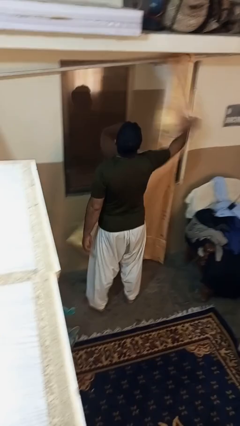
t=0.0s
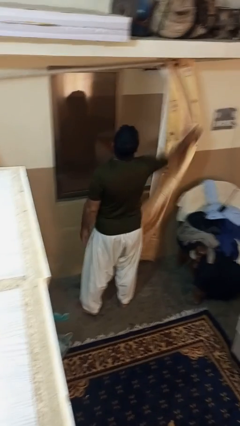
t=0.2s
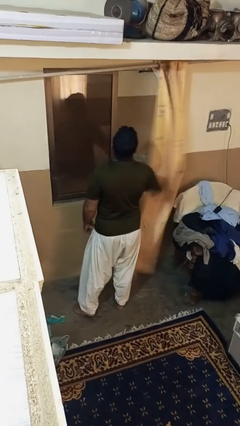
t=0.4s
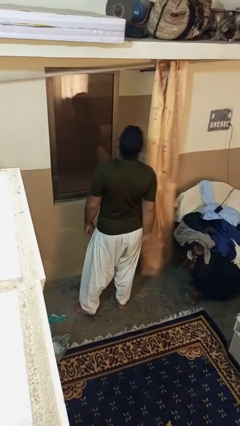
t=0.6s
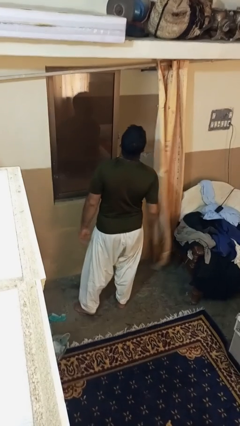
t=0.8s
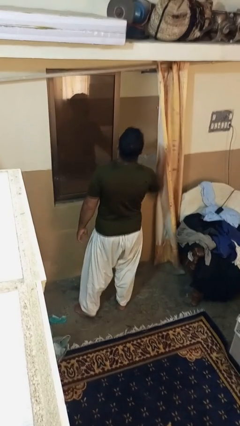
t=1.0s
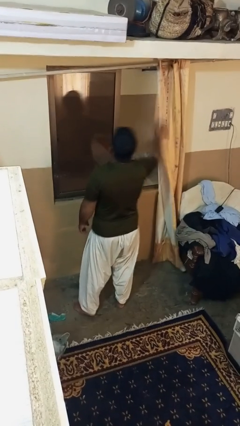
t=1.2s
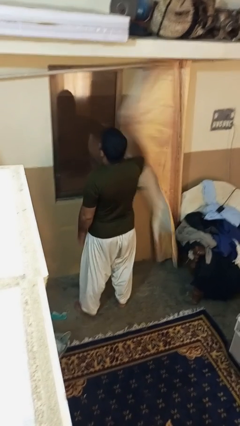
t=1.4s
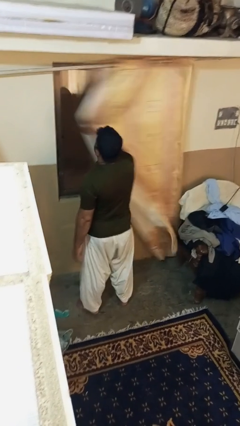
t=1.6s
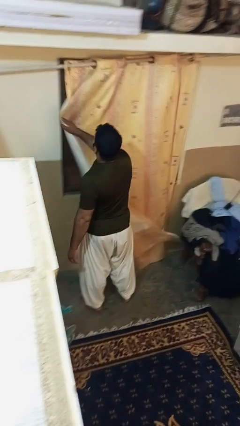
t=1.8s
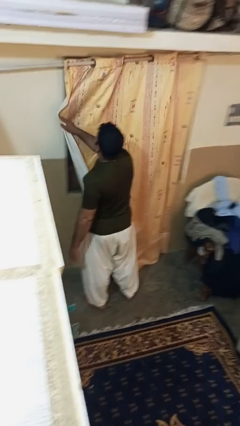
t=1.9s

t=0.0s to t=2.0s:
person closes curtains

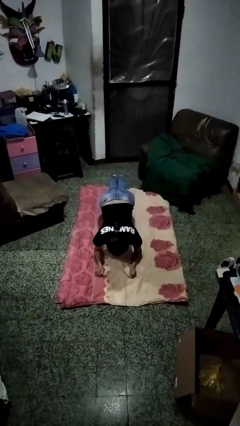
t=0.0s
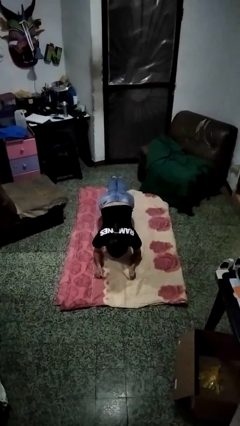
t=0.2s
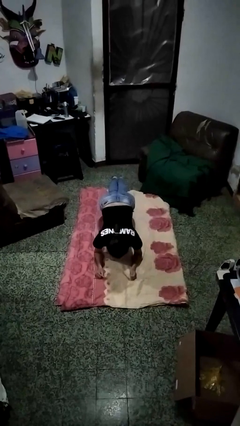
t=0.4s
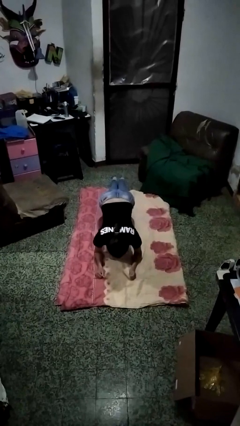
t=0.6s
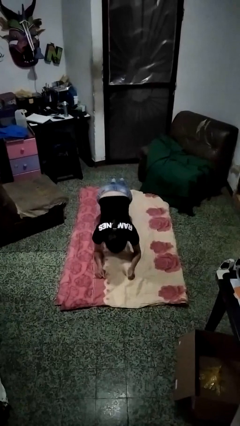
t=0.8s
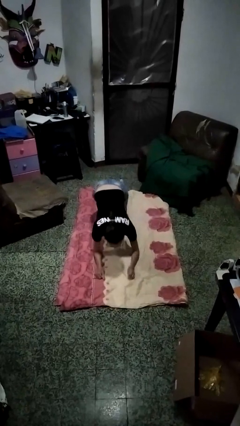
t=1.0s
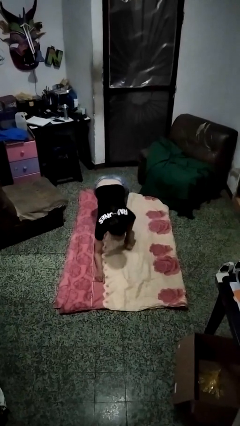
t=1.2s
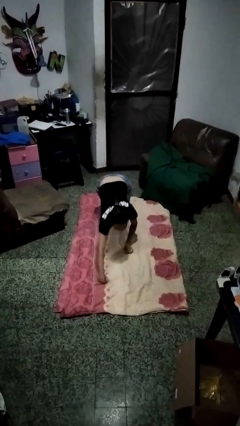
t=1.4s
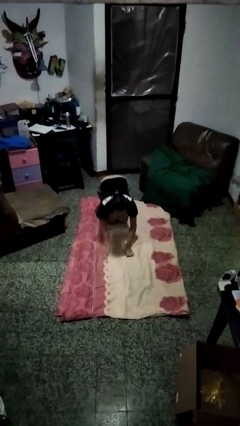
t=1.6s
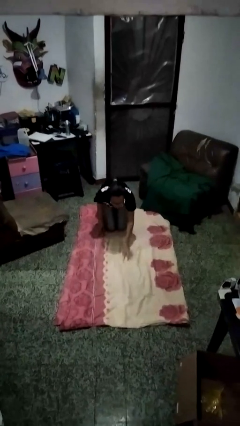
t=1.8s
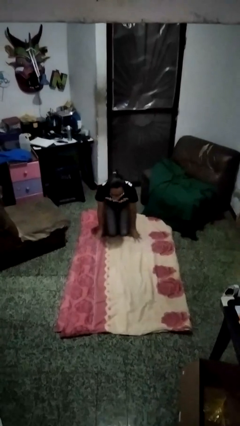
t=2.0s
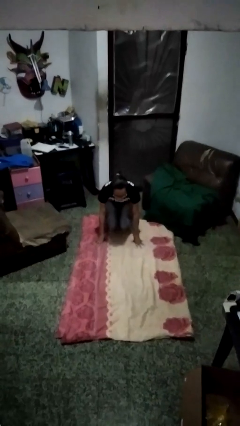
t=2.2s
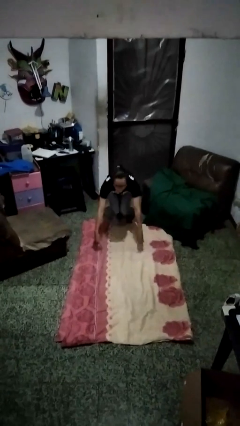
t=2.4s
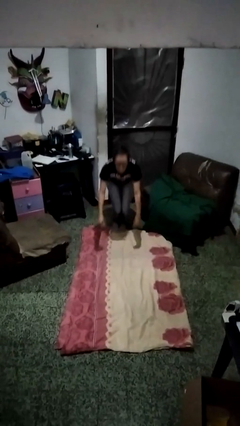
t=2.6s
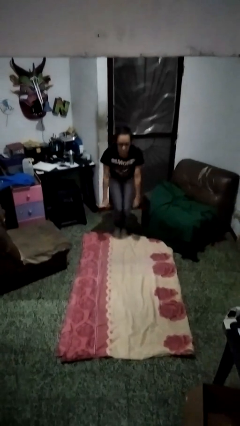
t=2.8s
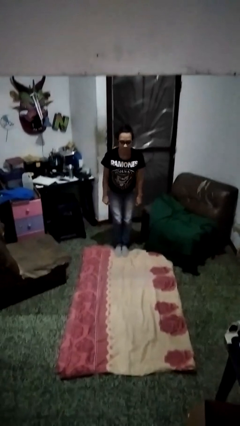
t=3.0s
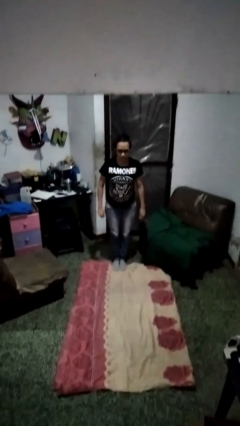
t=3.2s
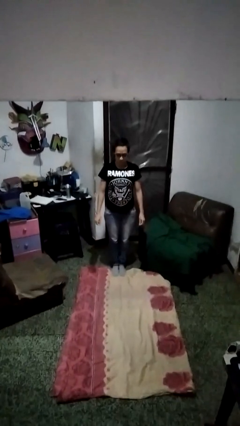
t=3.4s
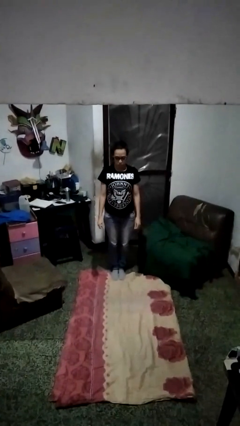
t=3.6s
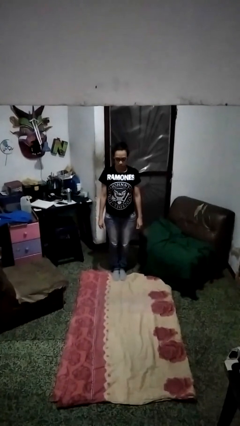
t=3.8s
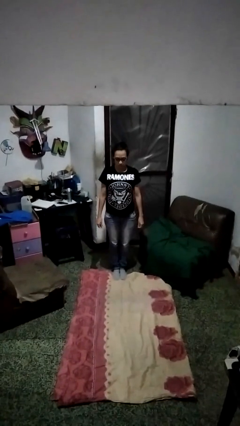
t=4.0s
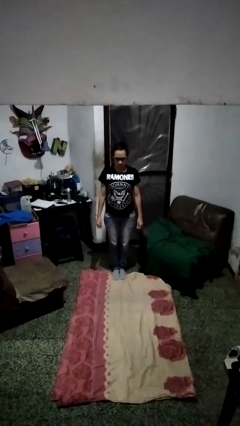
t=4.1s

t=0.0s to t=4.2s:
person stands up from floor

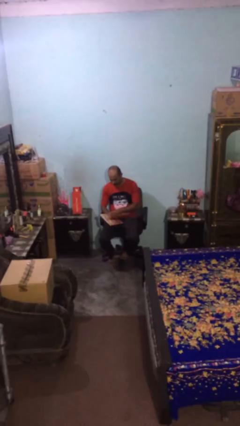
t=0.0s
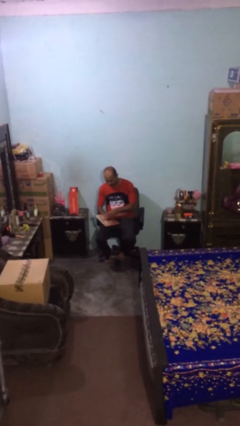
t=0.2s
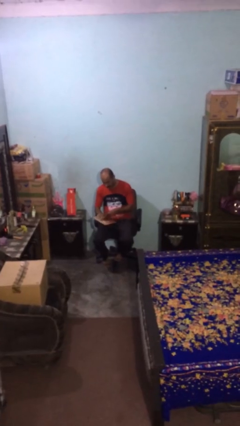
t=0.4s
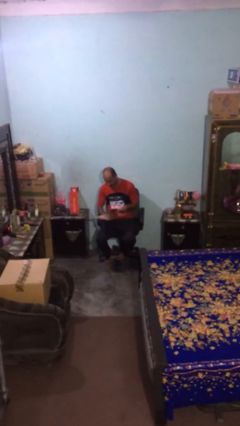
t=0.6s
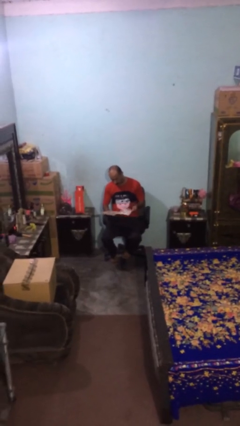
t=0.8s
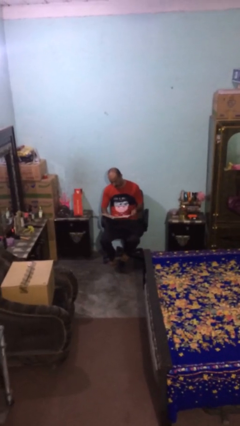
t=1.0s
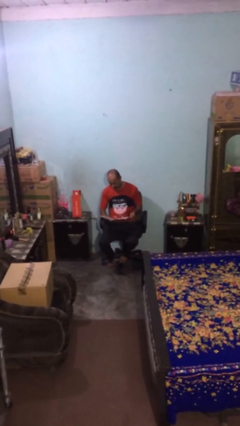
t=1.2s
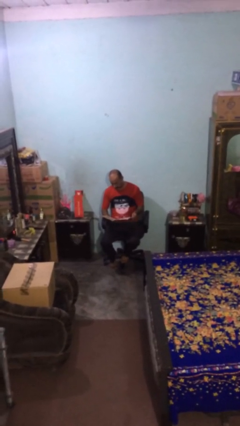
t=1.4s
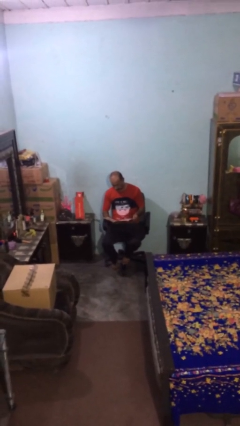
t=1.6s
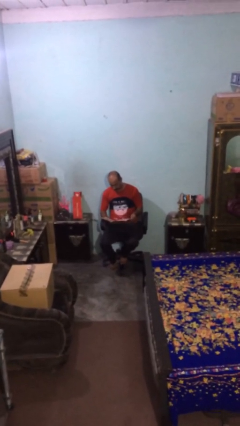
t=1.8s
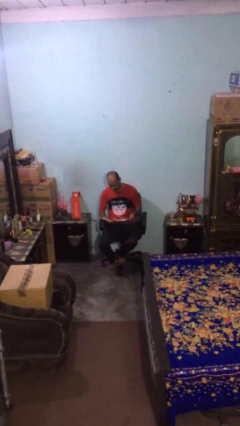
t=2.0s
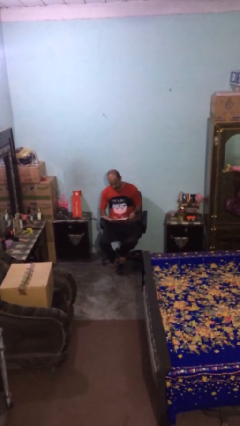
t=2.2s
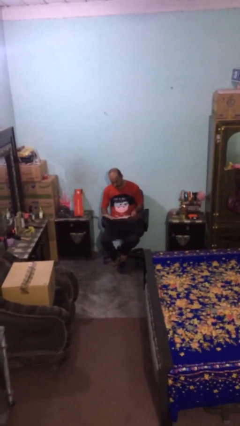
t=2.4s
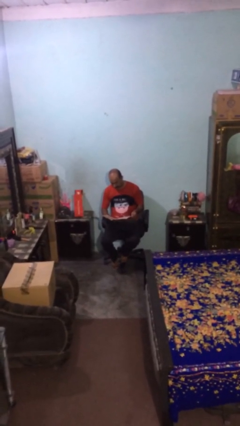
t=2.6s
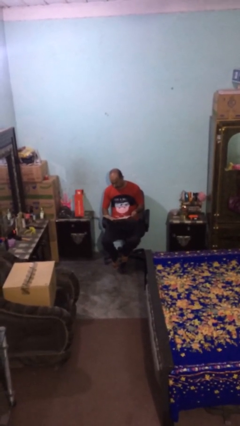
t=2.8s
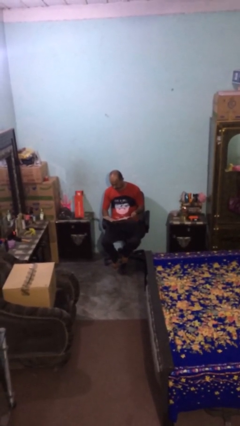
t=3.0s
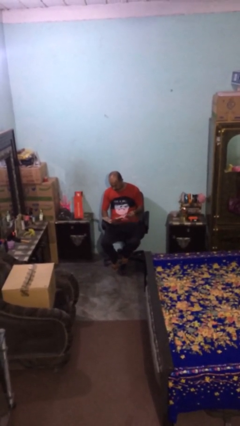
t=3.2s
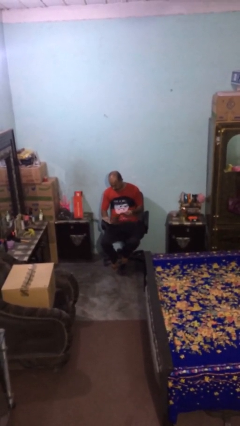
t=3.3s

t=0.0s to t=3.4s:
person reads document

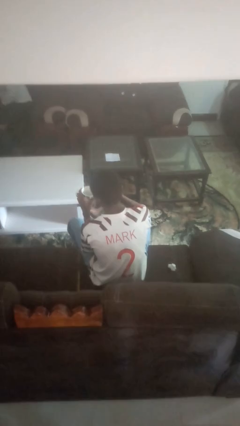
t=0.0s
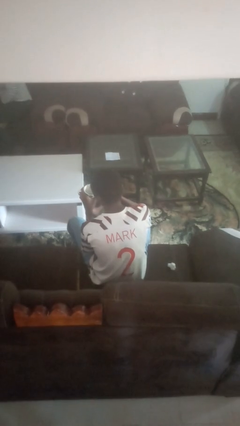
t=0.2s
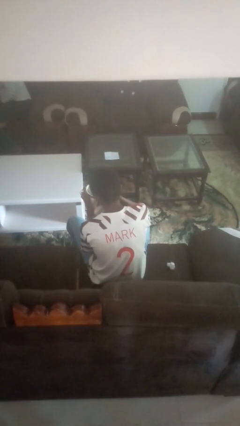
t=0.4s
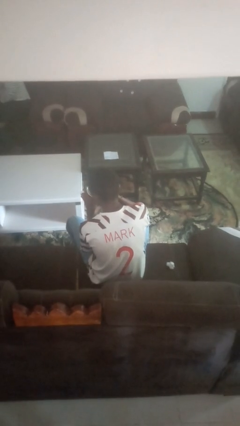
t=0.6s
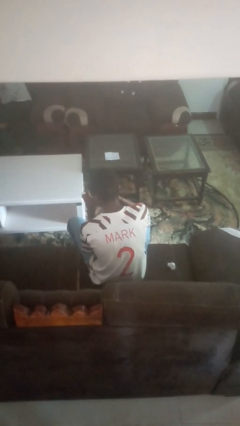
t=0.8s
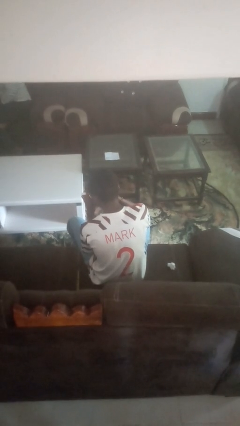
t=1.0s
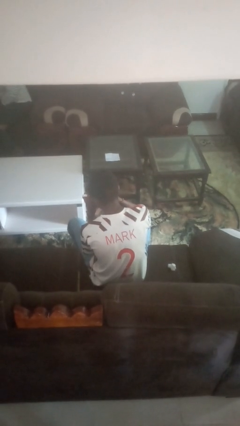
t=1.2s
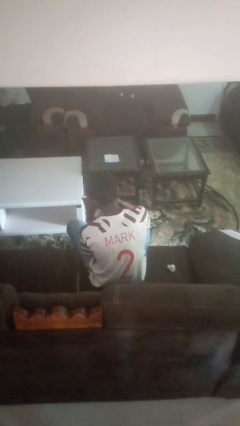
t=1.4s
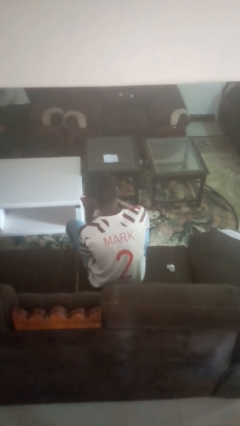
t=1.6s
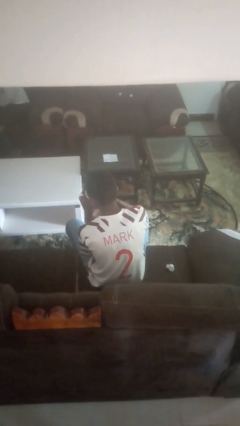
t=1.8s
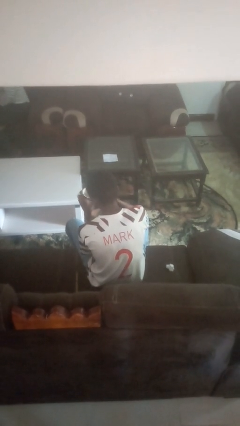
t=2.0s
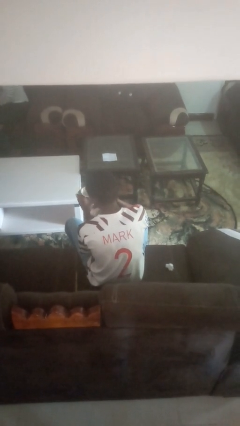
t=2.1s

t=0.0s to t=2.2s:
person drinks from mug

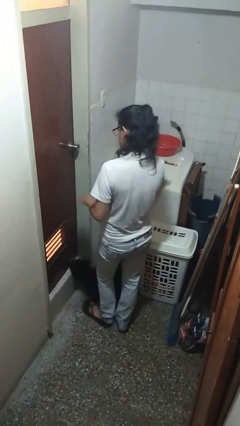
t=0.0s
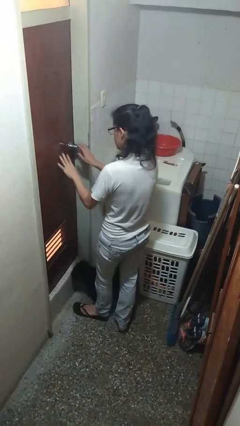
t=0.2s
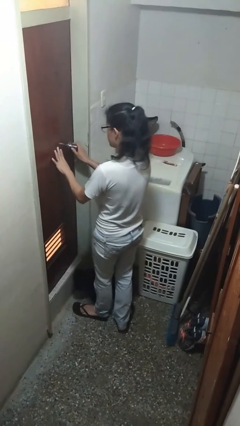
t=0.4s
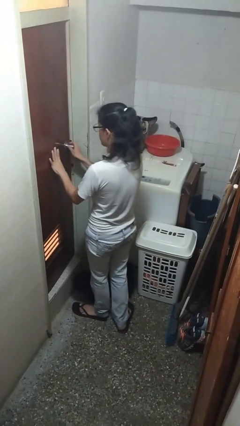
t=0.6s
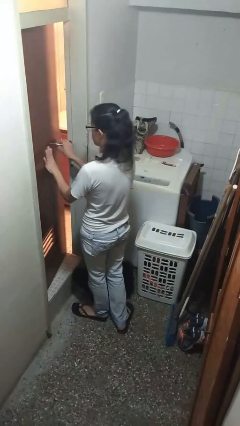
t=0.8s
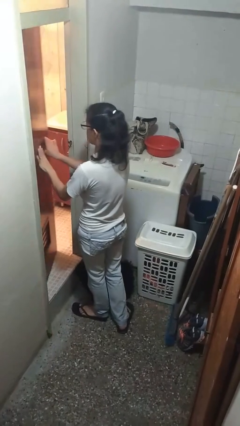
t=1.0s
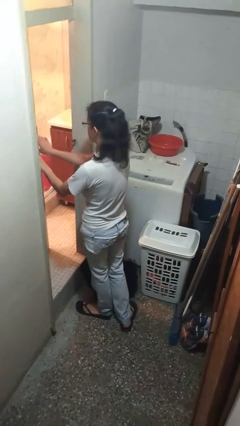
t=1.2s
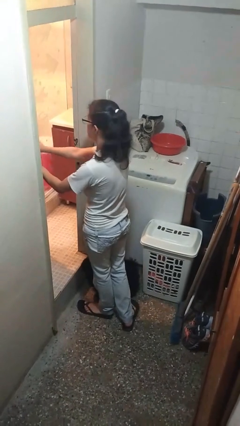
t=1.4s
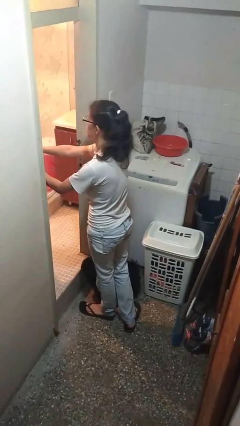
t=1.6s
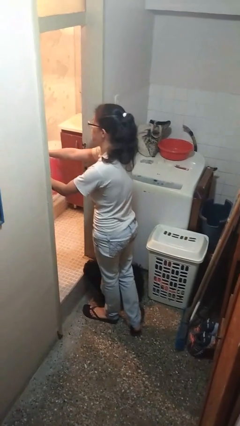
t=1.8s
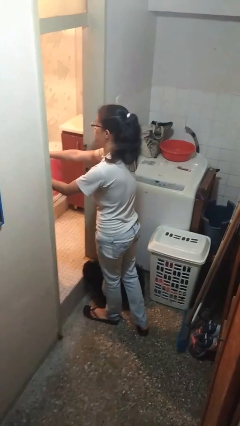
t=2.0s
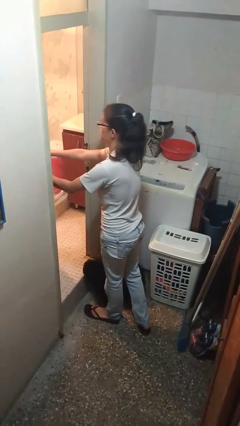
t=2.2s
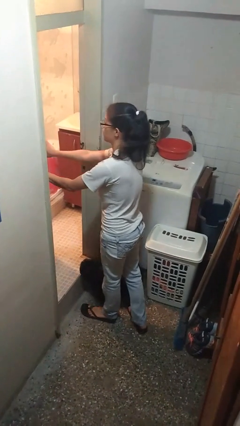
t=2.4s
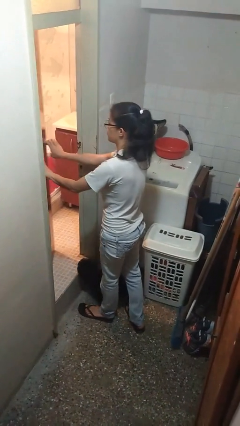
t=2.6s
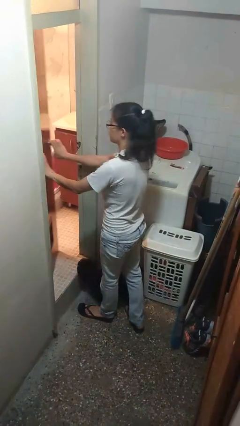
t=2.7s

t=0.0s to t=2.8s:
person opens facility door

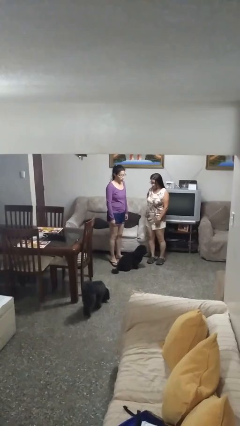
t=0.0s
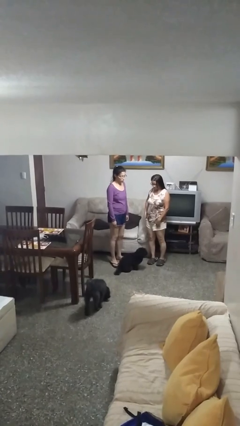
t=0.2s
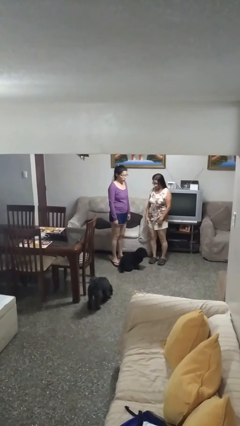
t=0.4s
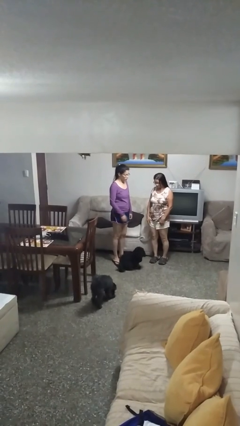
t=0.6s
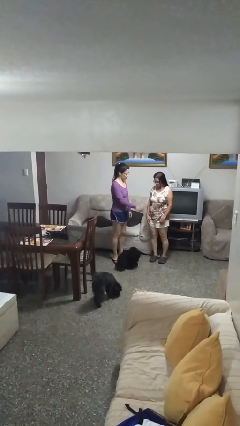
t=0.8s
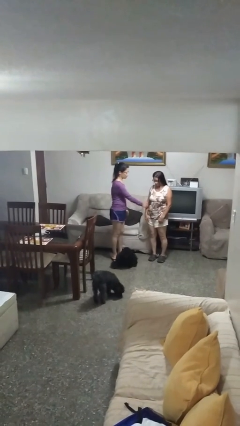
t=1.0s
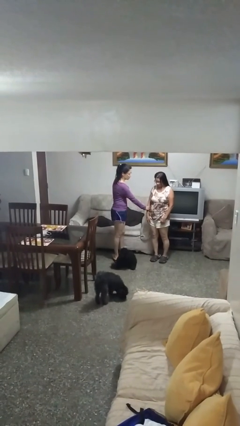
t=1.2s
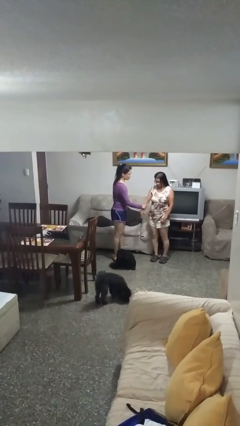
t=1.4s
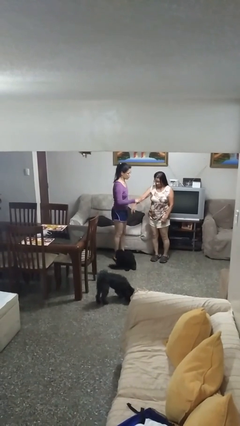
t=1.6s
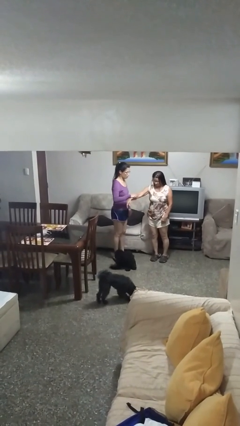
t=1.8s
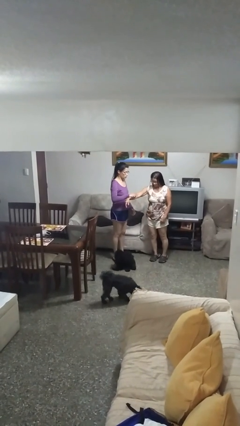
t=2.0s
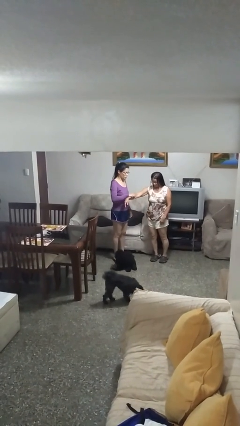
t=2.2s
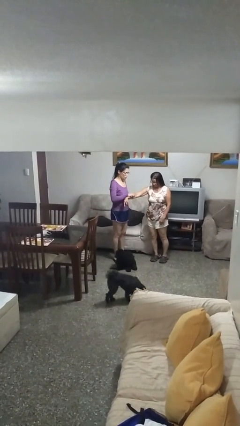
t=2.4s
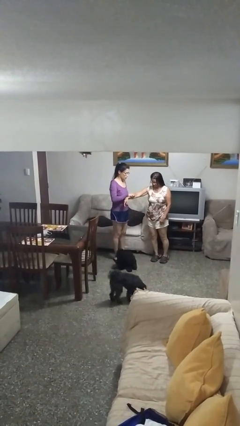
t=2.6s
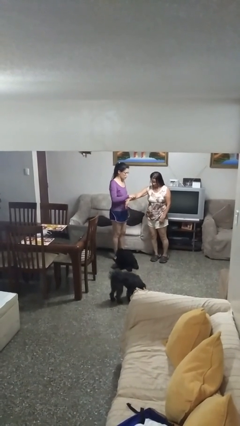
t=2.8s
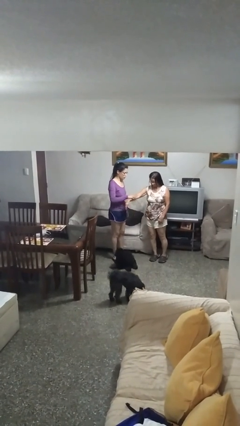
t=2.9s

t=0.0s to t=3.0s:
person grabs person by forearm
